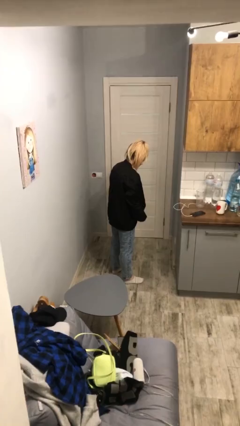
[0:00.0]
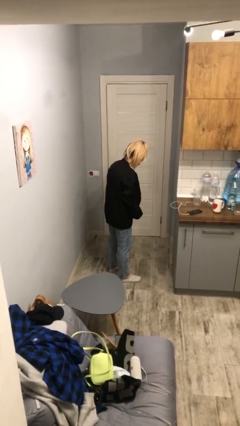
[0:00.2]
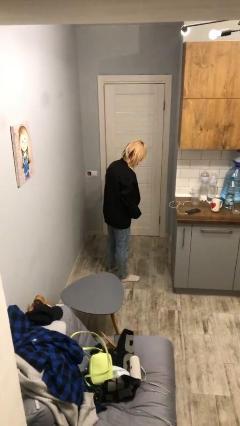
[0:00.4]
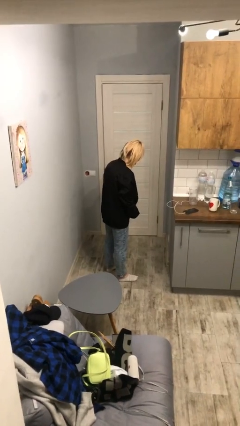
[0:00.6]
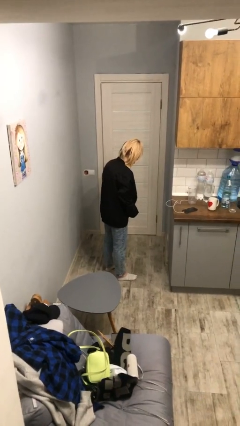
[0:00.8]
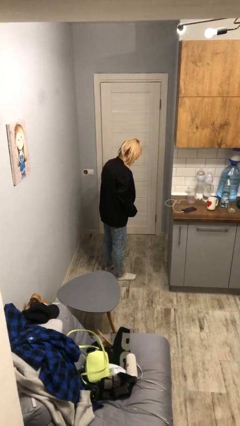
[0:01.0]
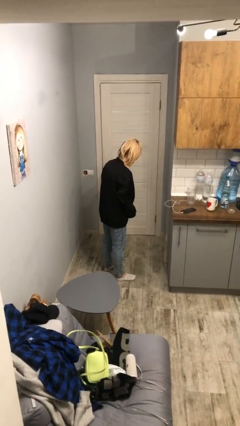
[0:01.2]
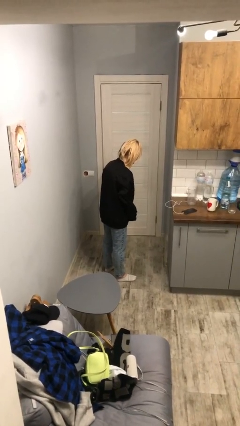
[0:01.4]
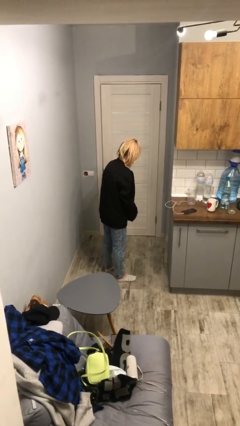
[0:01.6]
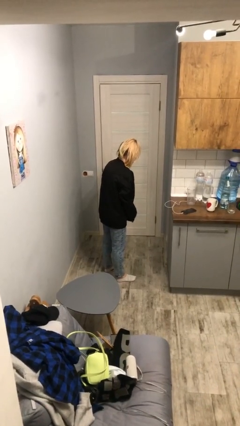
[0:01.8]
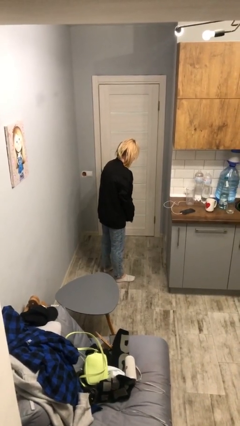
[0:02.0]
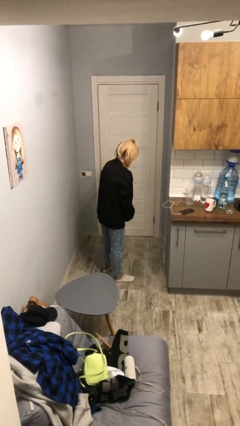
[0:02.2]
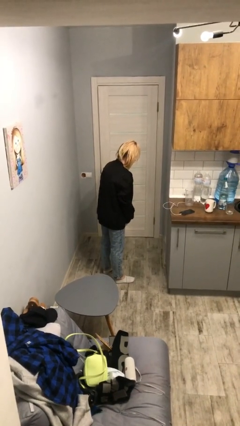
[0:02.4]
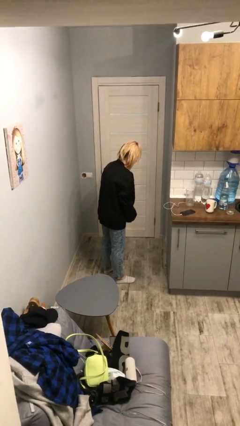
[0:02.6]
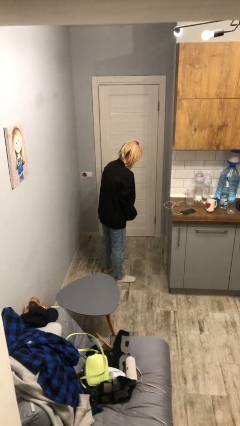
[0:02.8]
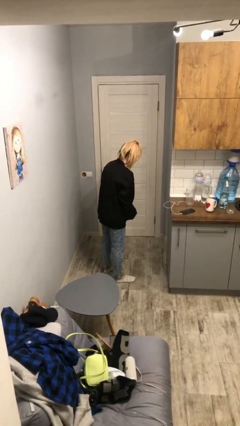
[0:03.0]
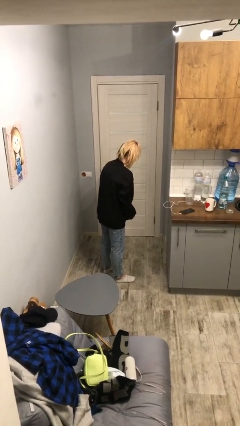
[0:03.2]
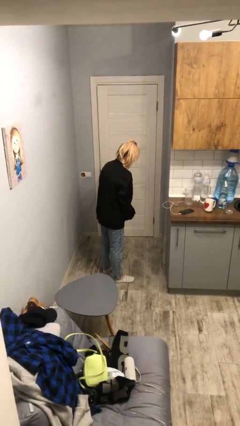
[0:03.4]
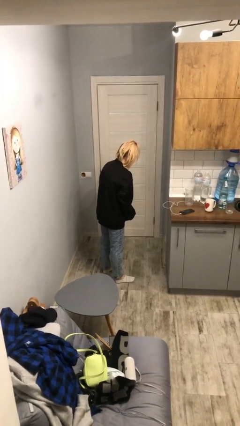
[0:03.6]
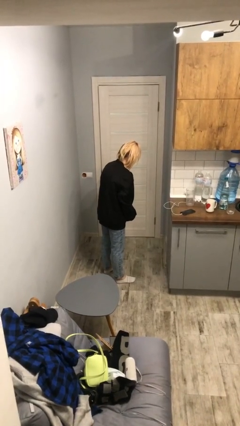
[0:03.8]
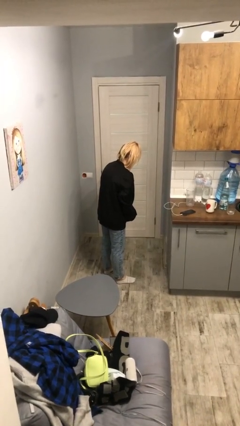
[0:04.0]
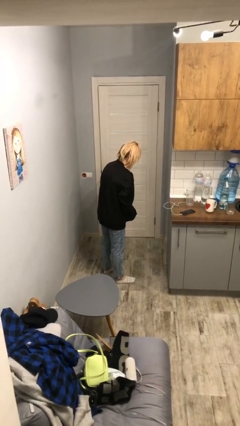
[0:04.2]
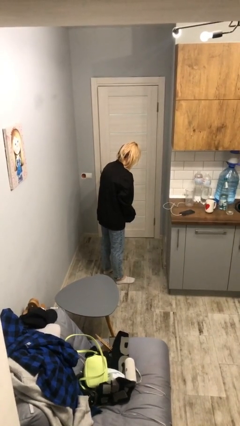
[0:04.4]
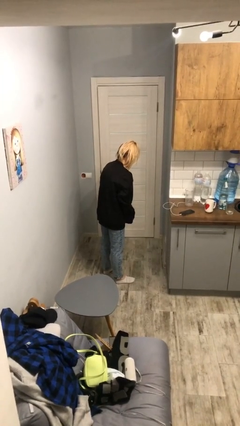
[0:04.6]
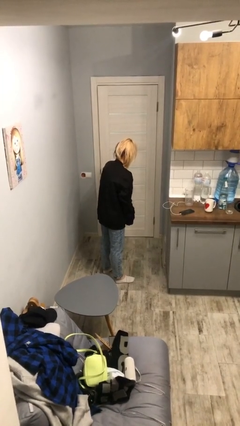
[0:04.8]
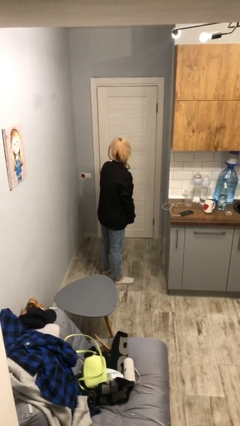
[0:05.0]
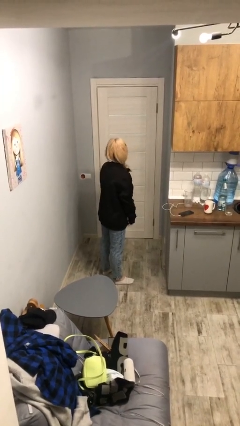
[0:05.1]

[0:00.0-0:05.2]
person zips up jacket

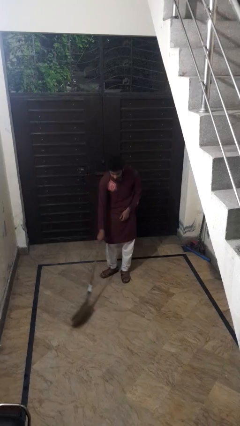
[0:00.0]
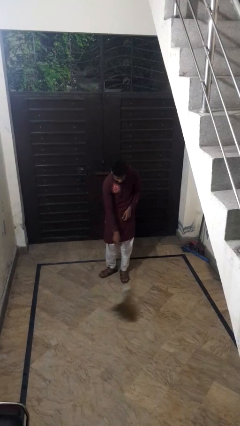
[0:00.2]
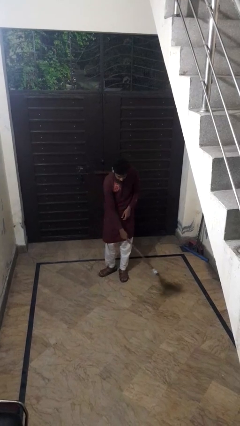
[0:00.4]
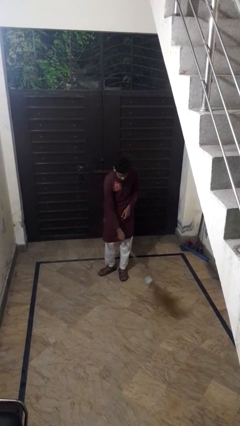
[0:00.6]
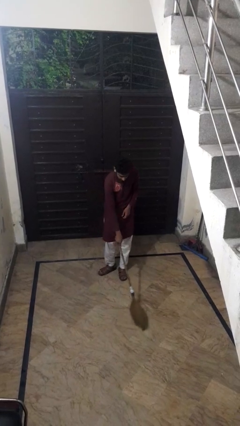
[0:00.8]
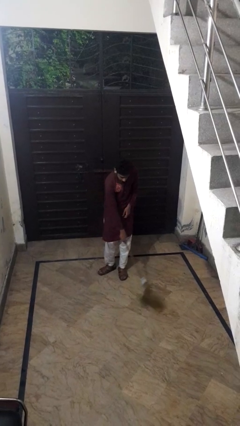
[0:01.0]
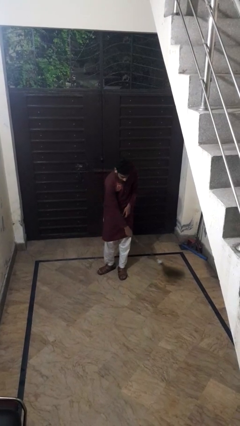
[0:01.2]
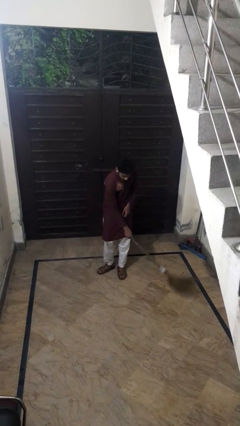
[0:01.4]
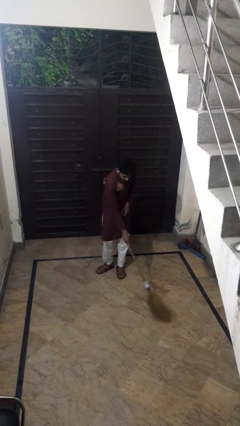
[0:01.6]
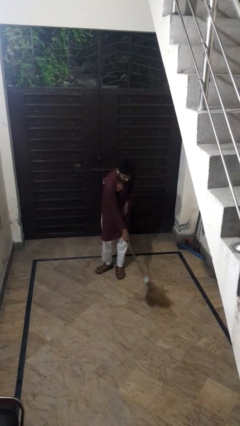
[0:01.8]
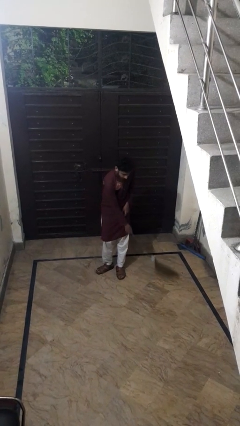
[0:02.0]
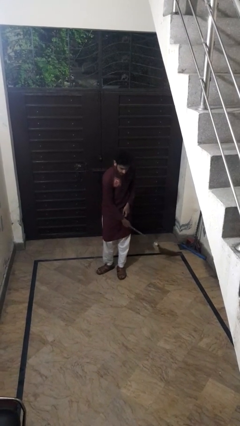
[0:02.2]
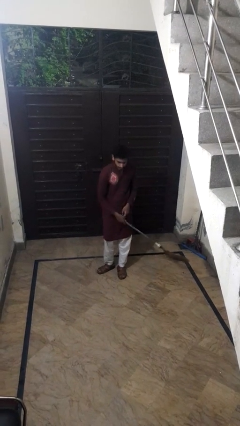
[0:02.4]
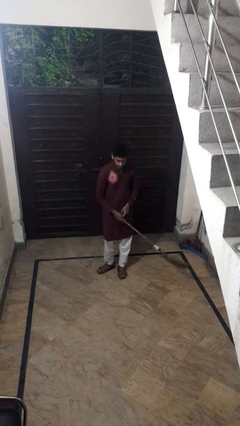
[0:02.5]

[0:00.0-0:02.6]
person sweeps floor

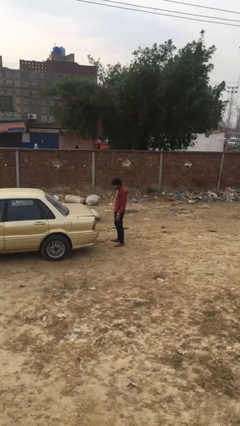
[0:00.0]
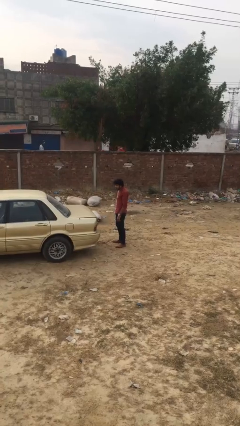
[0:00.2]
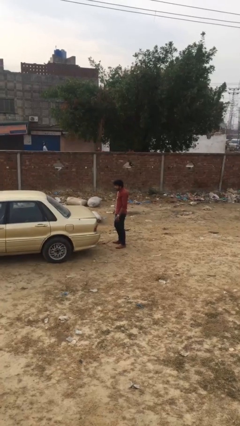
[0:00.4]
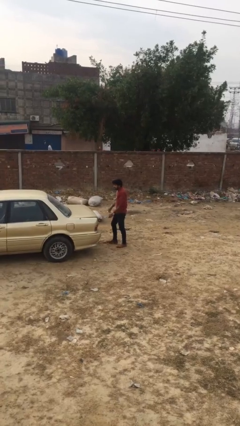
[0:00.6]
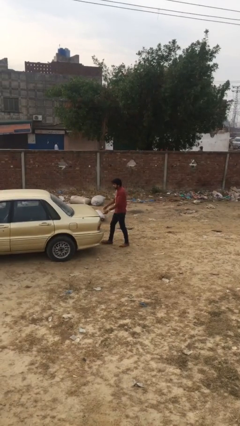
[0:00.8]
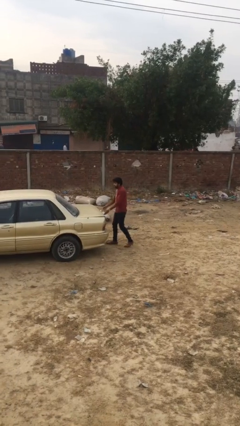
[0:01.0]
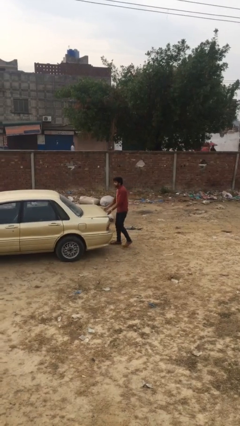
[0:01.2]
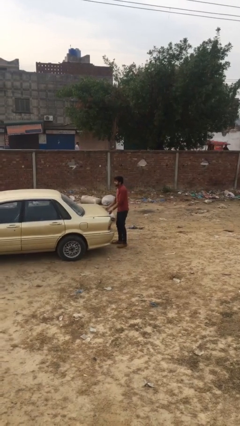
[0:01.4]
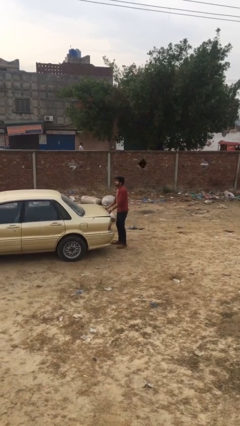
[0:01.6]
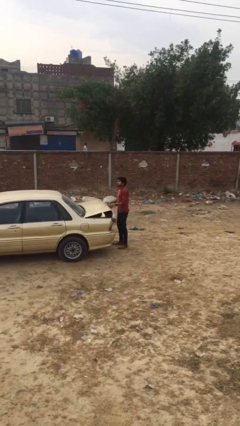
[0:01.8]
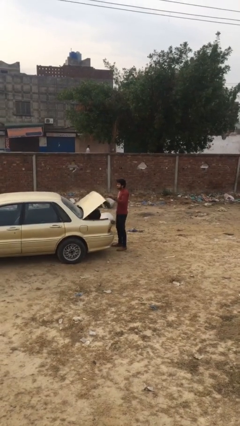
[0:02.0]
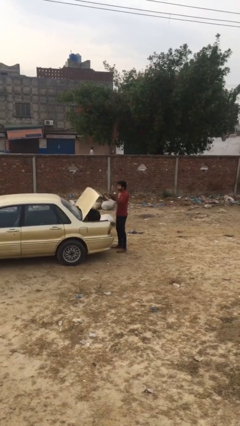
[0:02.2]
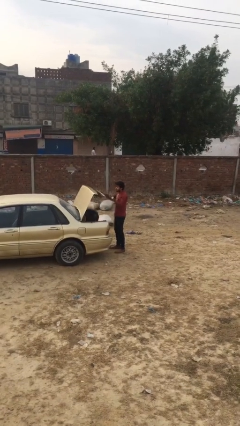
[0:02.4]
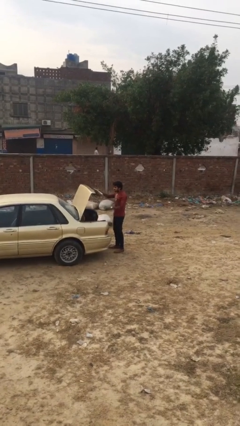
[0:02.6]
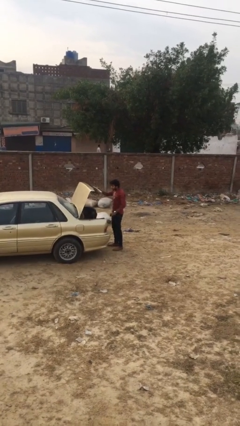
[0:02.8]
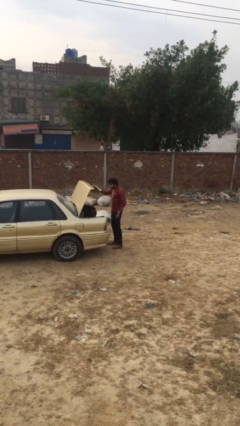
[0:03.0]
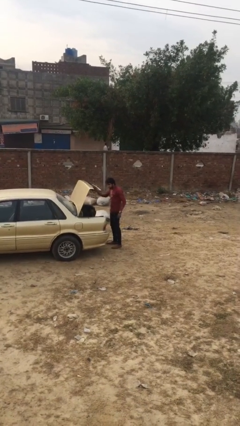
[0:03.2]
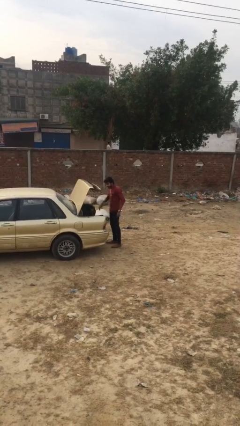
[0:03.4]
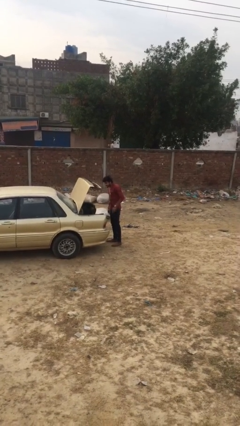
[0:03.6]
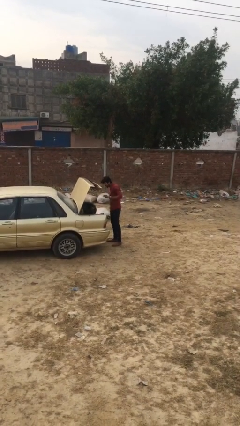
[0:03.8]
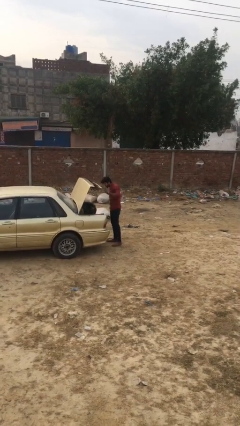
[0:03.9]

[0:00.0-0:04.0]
person opens car trunk

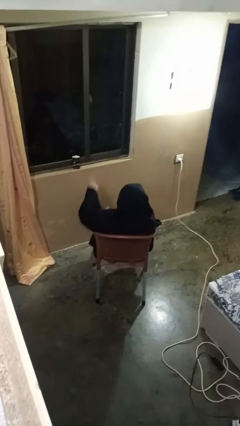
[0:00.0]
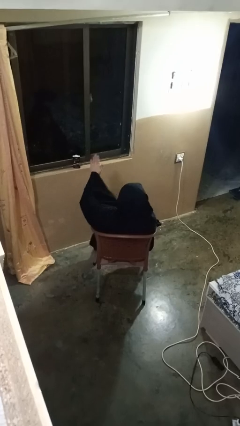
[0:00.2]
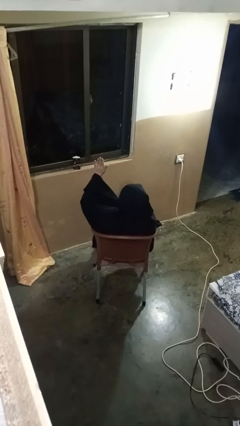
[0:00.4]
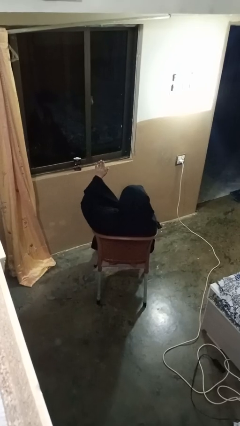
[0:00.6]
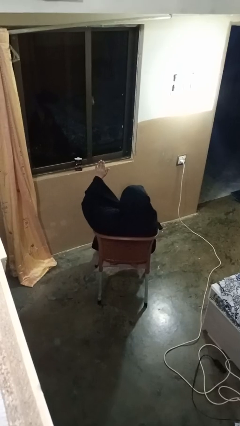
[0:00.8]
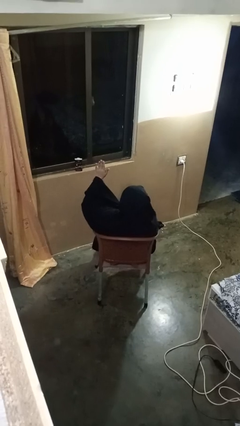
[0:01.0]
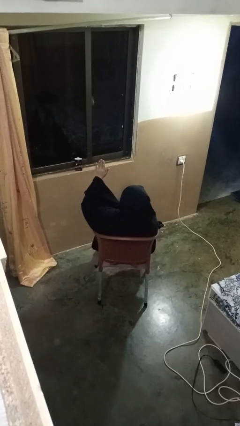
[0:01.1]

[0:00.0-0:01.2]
person gestures raise hand

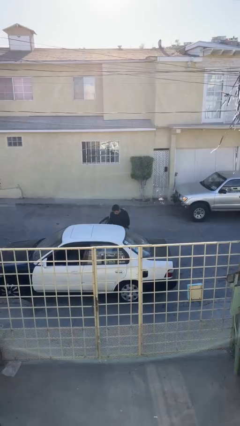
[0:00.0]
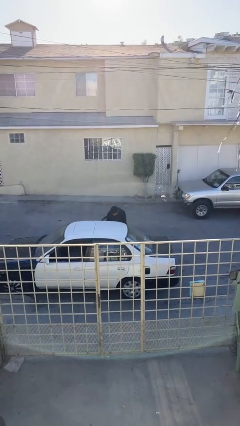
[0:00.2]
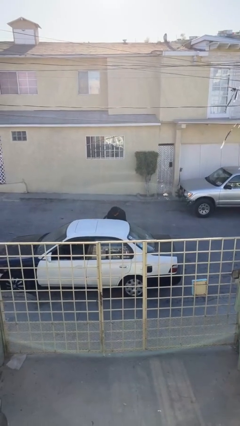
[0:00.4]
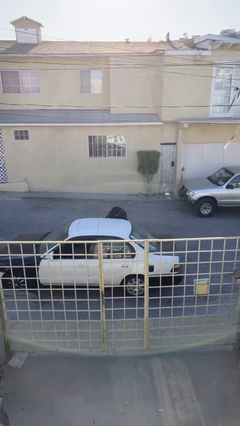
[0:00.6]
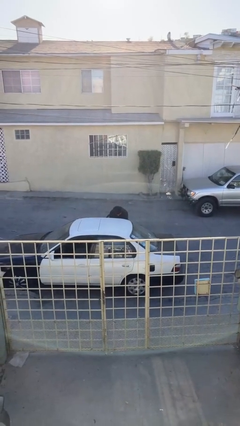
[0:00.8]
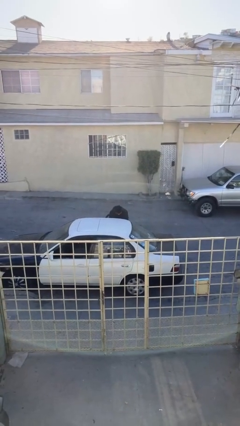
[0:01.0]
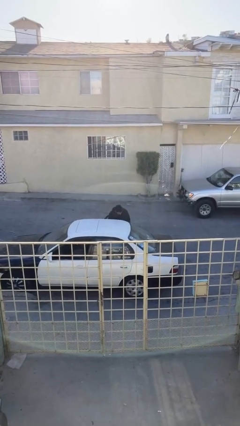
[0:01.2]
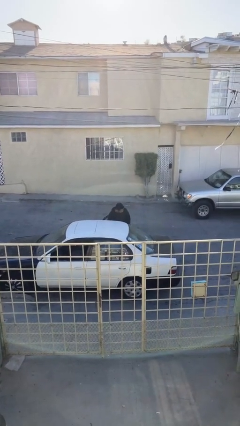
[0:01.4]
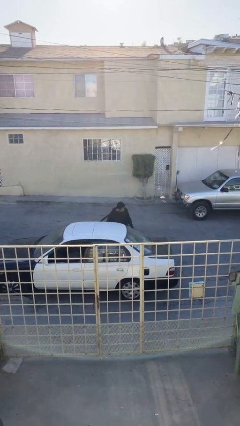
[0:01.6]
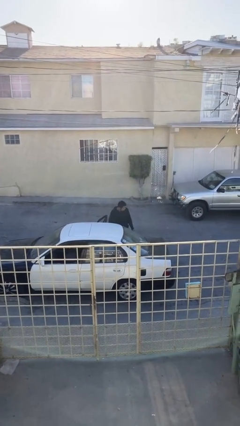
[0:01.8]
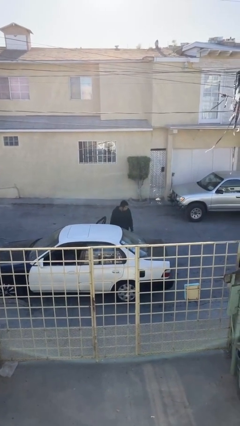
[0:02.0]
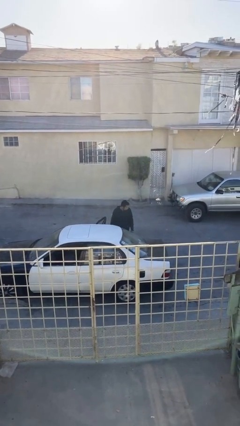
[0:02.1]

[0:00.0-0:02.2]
person loads car

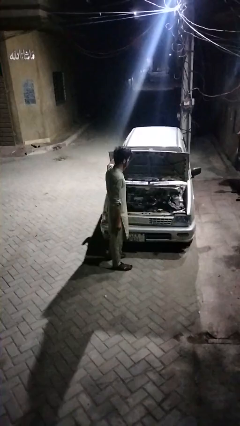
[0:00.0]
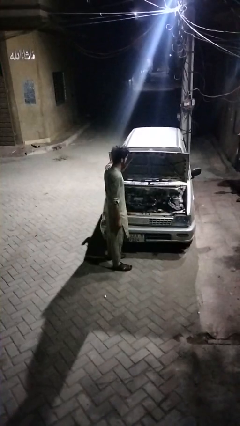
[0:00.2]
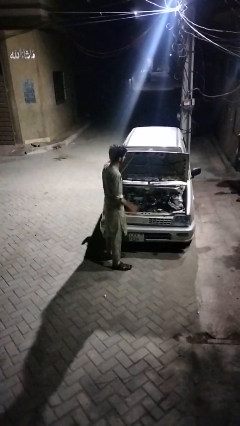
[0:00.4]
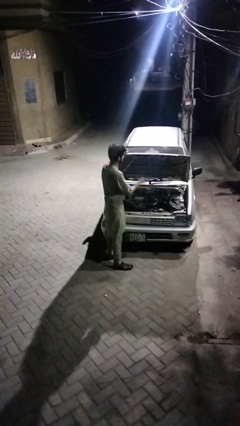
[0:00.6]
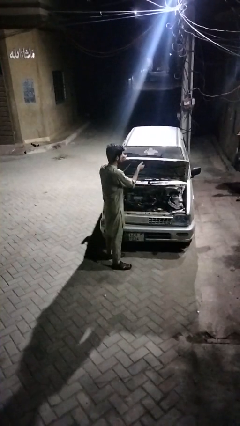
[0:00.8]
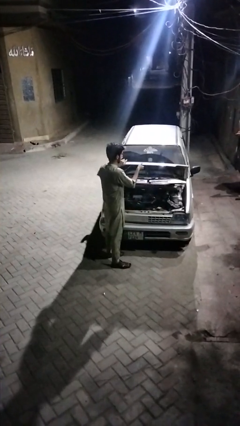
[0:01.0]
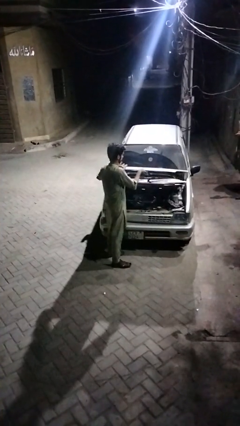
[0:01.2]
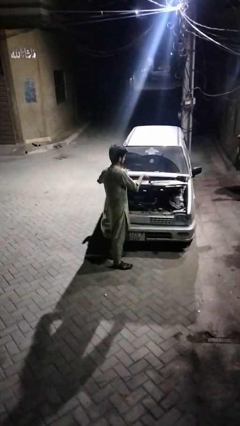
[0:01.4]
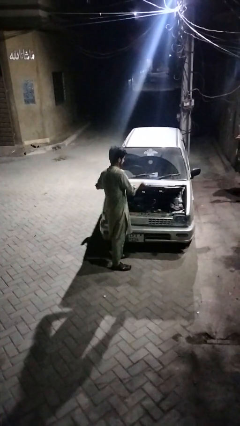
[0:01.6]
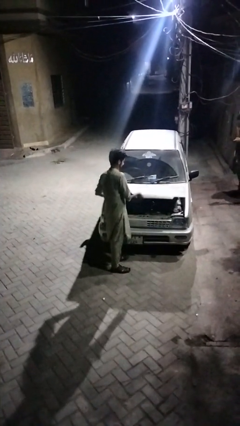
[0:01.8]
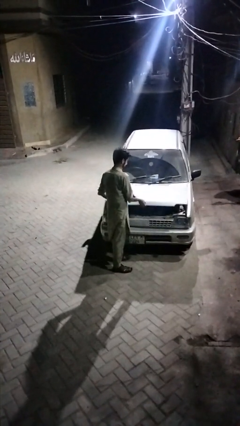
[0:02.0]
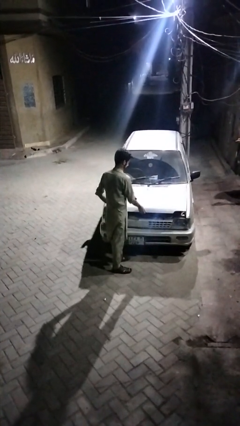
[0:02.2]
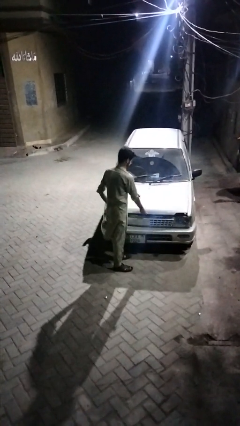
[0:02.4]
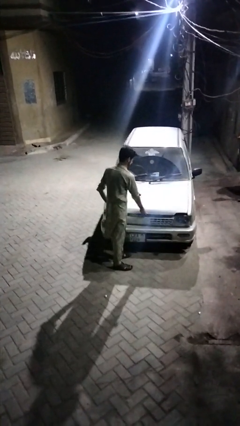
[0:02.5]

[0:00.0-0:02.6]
person closes car hood
